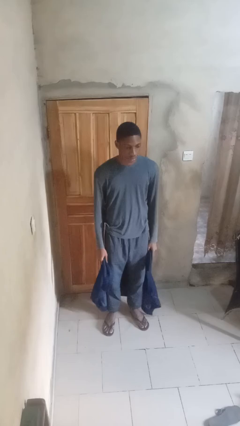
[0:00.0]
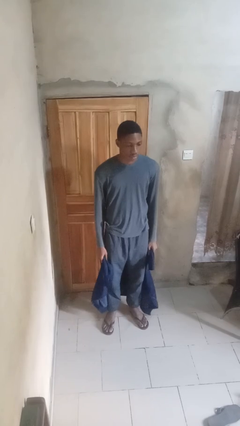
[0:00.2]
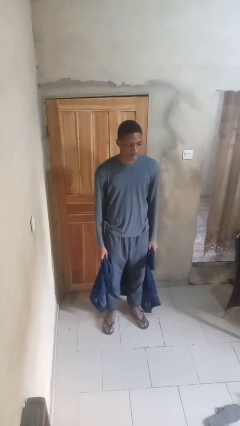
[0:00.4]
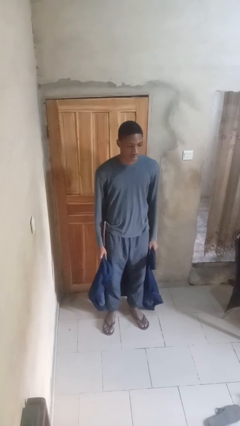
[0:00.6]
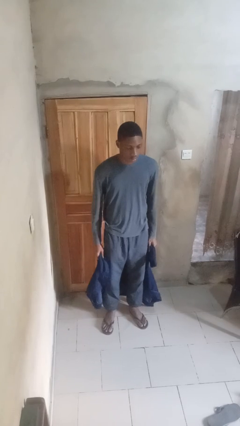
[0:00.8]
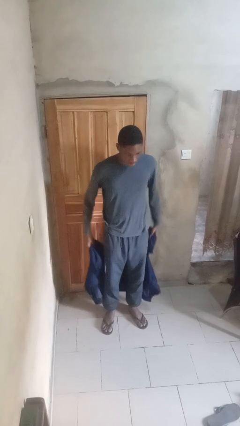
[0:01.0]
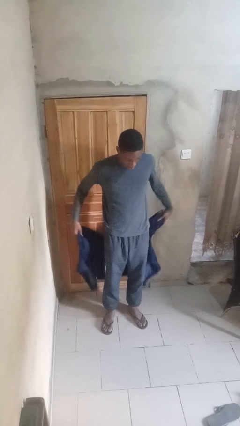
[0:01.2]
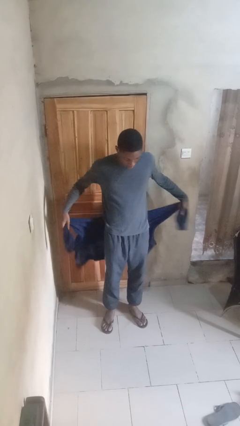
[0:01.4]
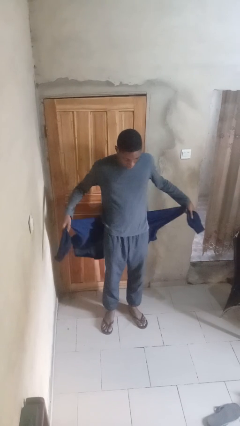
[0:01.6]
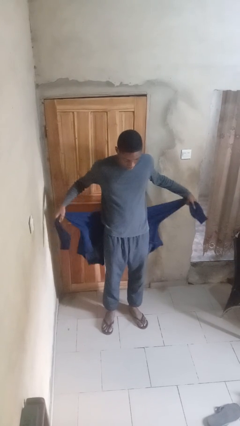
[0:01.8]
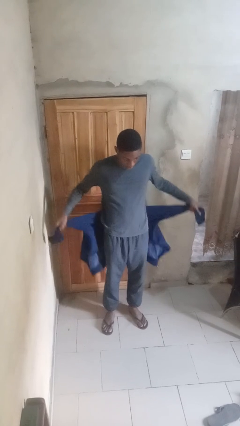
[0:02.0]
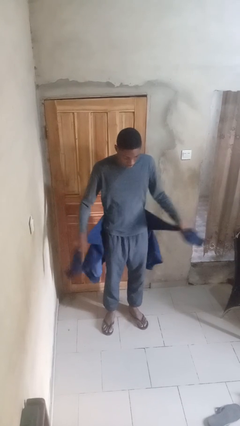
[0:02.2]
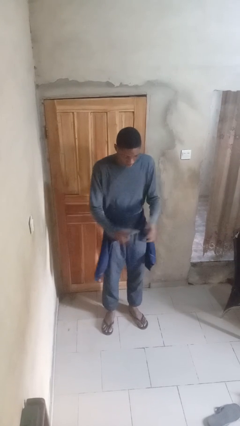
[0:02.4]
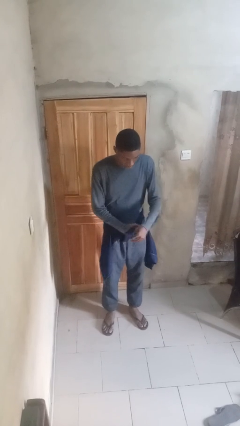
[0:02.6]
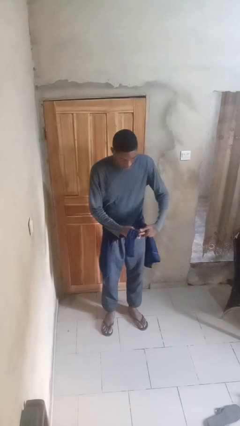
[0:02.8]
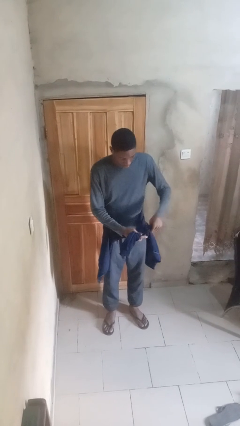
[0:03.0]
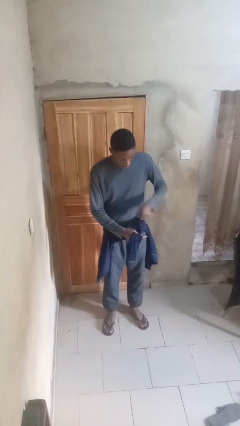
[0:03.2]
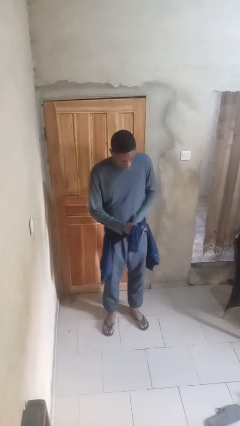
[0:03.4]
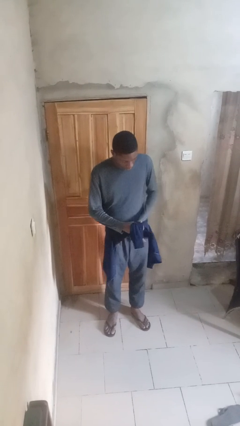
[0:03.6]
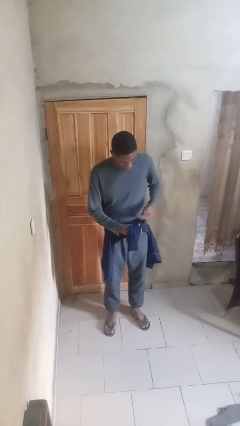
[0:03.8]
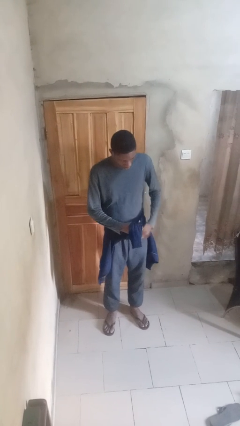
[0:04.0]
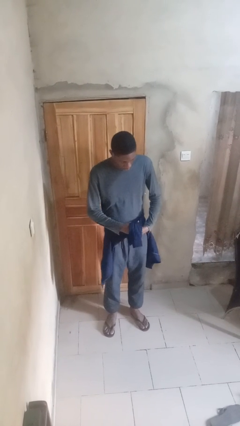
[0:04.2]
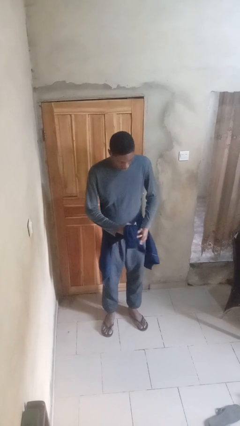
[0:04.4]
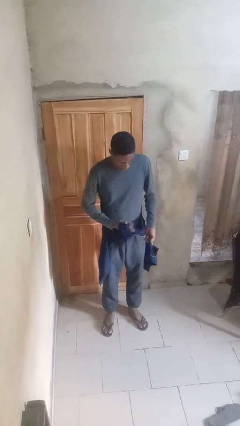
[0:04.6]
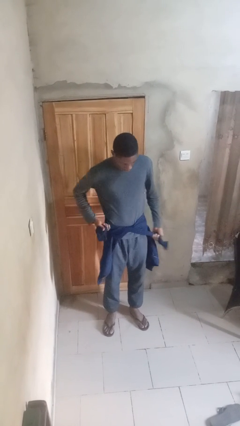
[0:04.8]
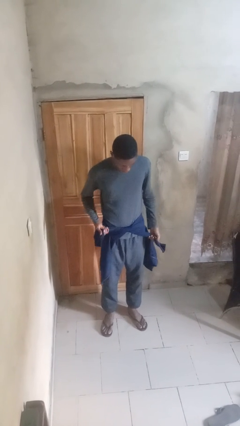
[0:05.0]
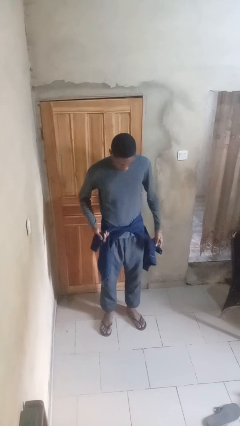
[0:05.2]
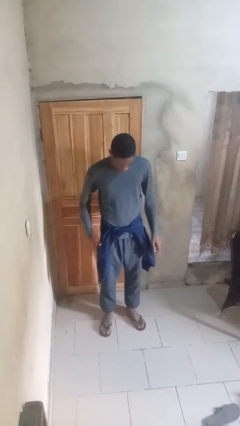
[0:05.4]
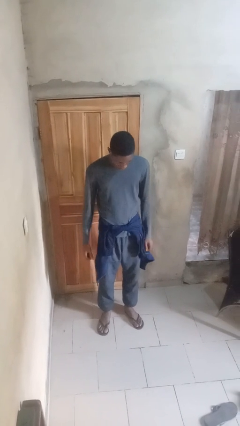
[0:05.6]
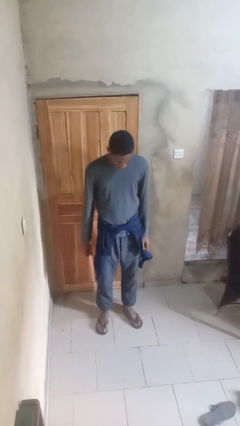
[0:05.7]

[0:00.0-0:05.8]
person ties jacket around waist

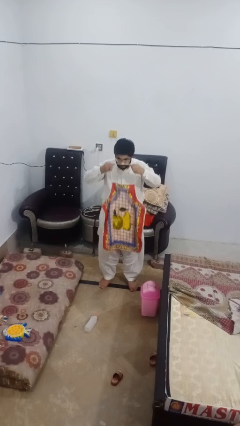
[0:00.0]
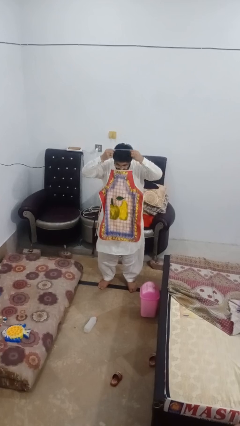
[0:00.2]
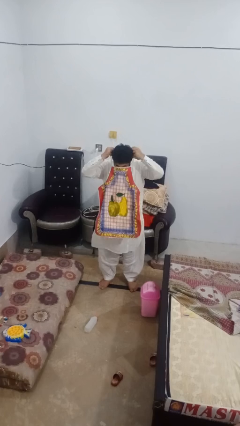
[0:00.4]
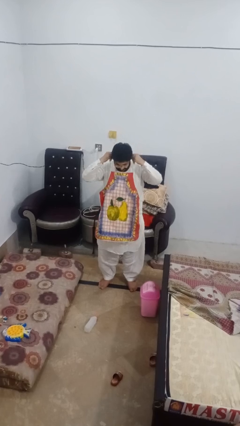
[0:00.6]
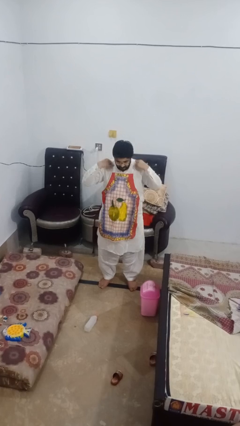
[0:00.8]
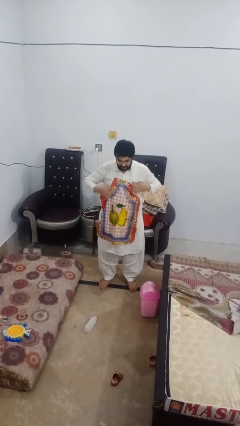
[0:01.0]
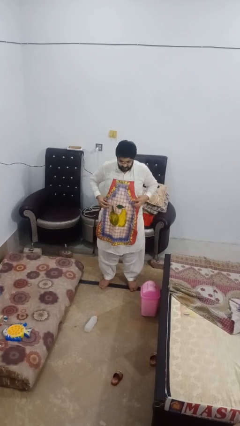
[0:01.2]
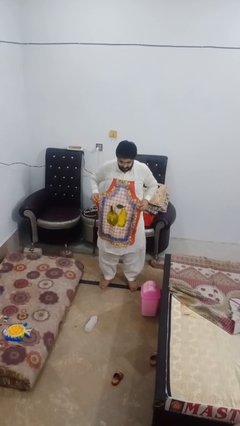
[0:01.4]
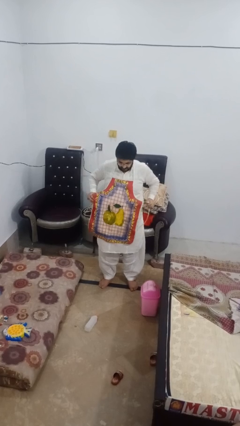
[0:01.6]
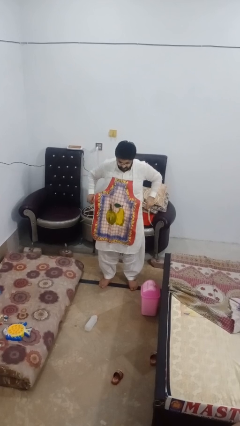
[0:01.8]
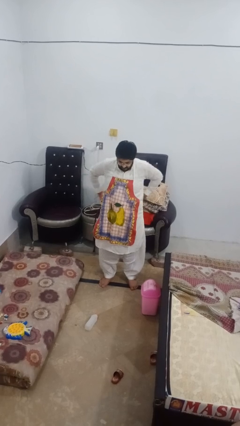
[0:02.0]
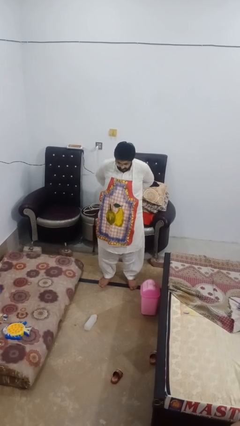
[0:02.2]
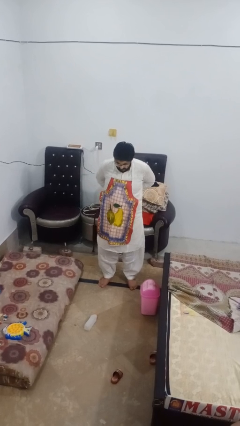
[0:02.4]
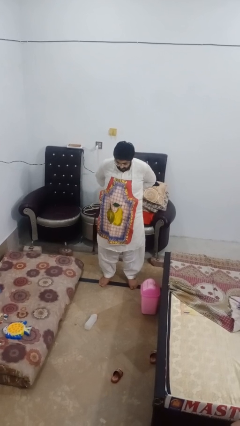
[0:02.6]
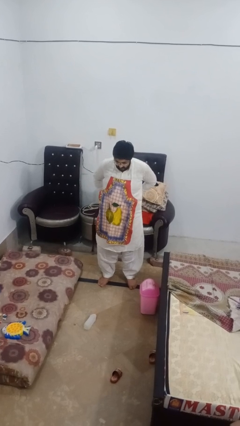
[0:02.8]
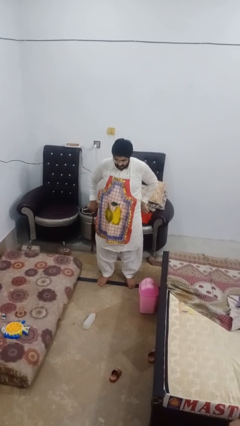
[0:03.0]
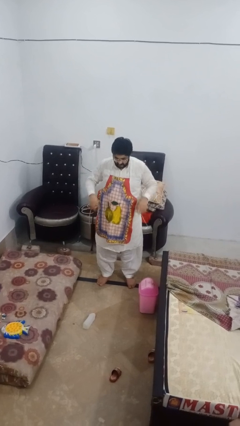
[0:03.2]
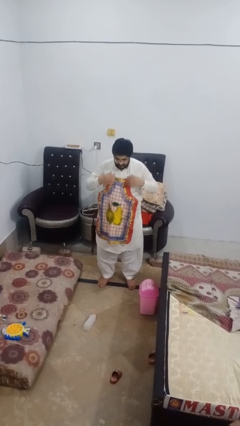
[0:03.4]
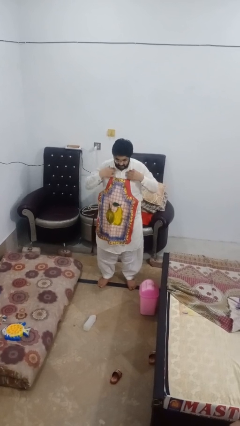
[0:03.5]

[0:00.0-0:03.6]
person puts on apron

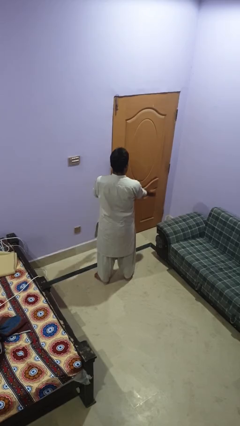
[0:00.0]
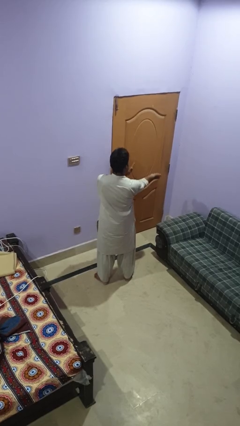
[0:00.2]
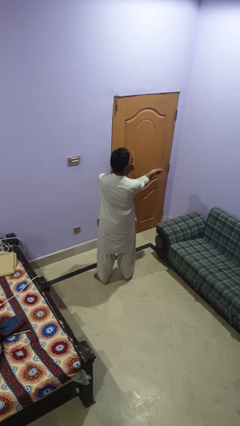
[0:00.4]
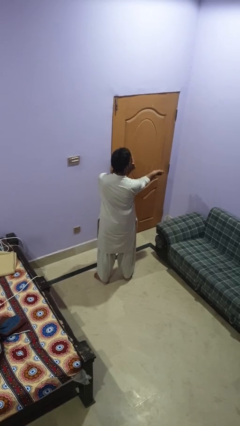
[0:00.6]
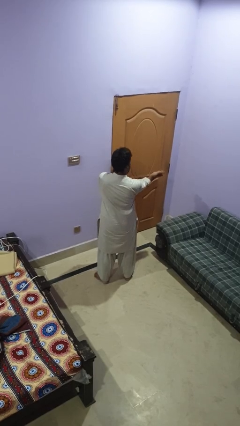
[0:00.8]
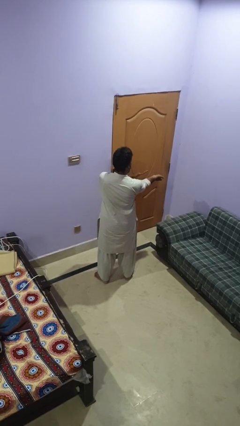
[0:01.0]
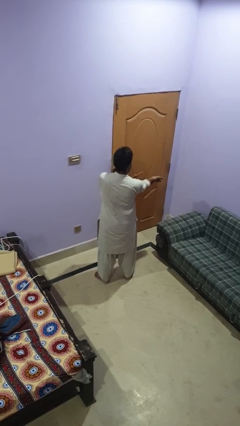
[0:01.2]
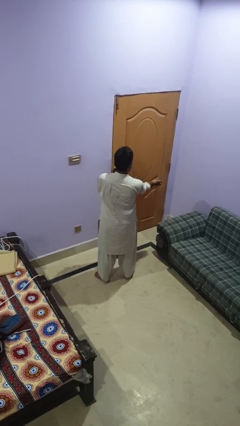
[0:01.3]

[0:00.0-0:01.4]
person swats bug

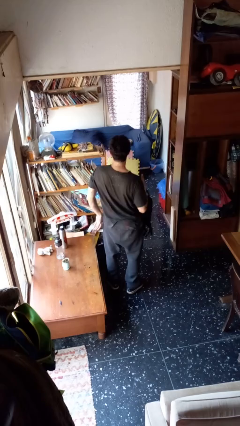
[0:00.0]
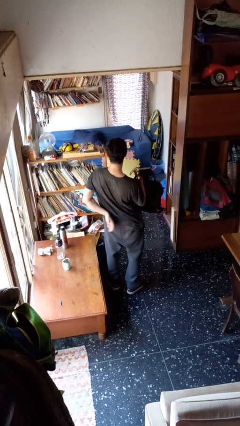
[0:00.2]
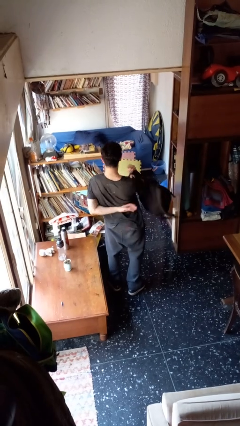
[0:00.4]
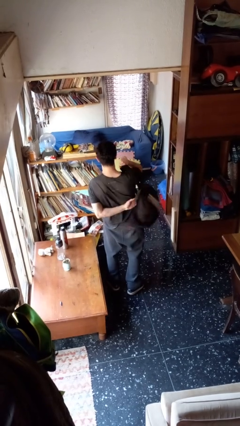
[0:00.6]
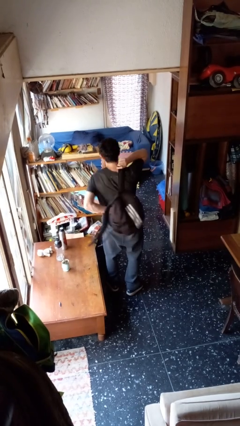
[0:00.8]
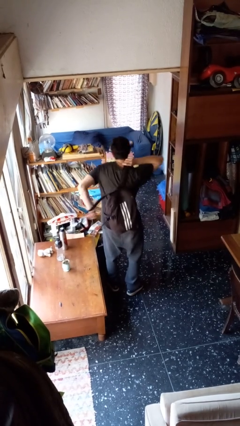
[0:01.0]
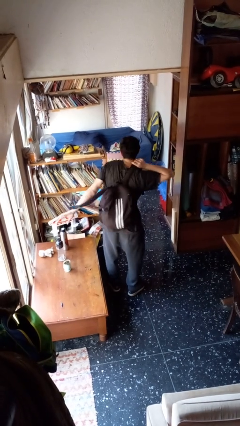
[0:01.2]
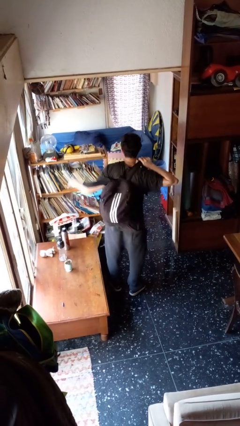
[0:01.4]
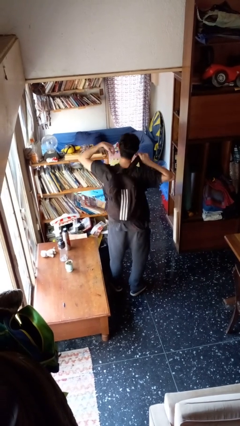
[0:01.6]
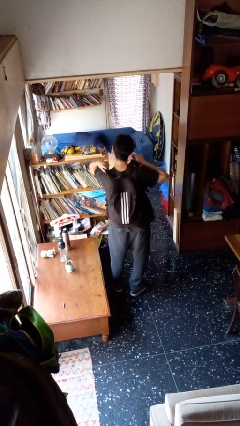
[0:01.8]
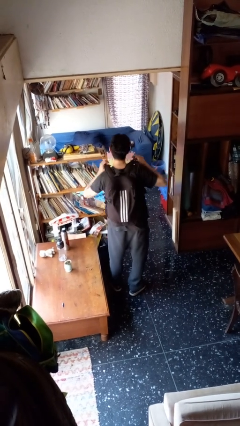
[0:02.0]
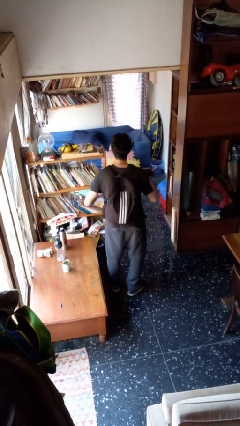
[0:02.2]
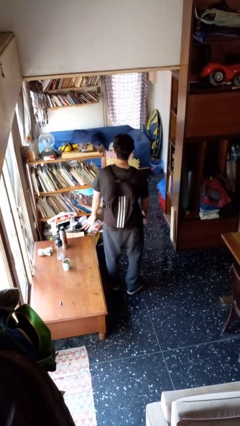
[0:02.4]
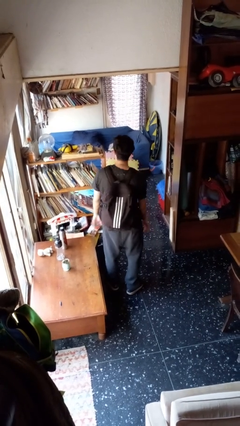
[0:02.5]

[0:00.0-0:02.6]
person puts on backpack

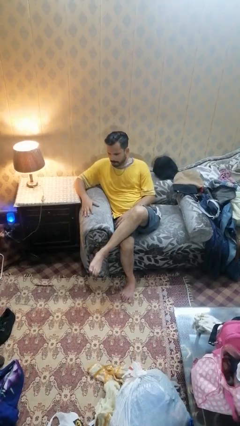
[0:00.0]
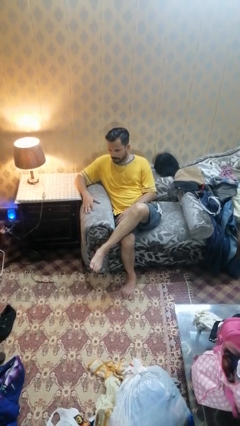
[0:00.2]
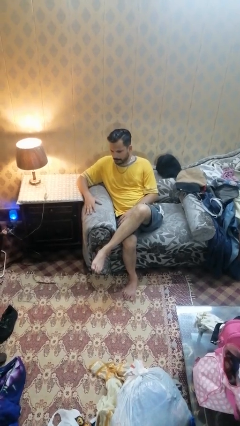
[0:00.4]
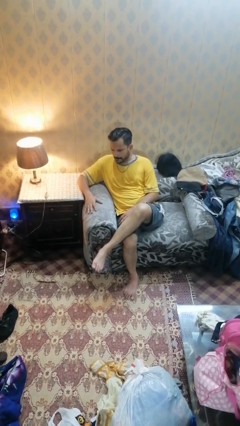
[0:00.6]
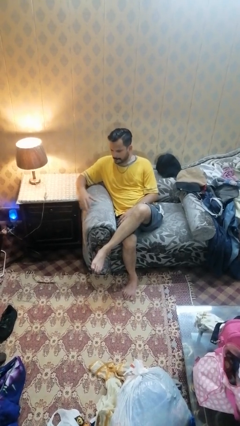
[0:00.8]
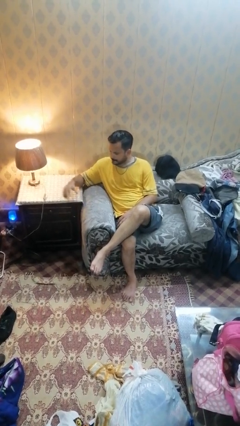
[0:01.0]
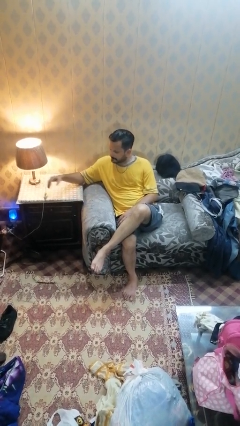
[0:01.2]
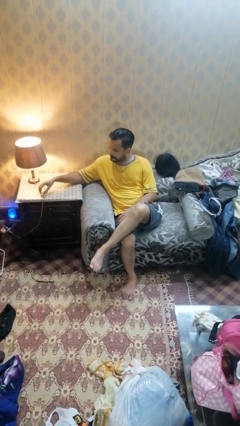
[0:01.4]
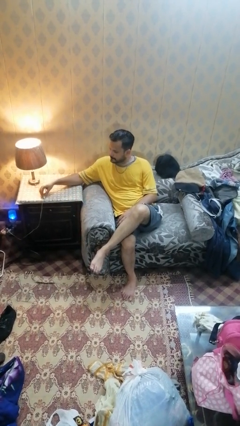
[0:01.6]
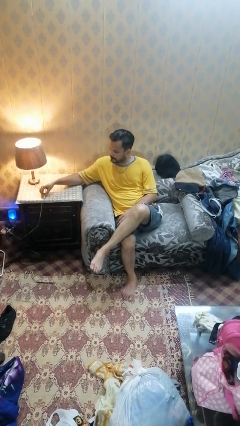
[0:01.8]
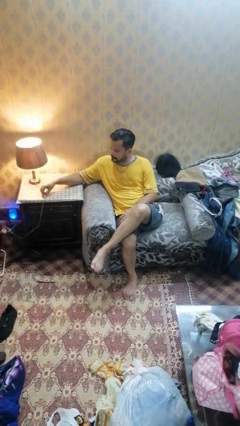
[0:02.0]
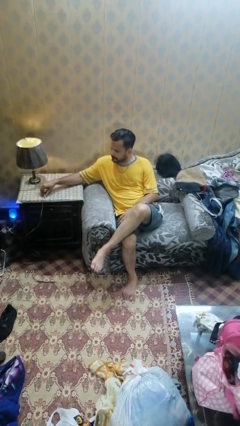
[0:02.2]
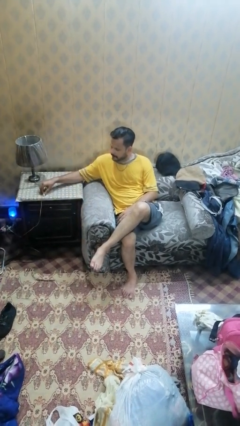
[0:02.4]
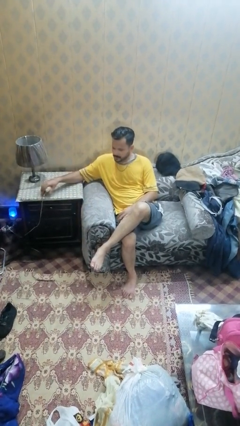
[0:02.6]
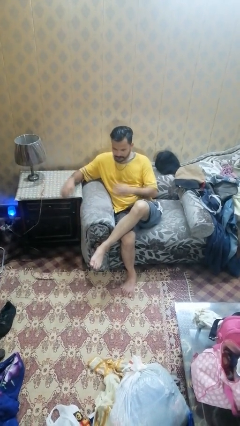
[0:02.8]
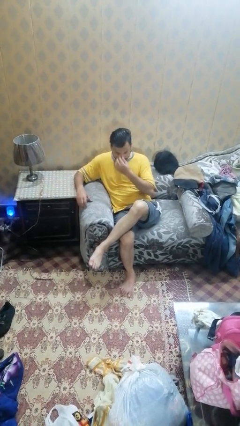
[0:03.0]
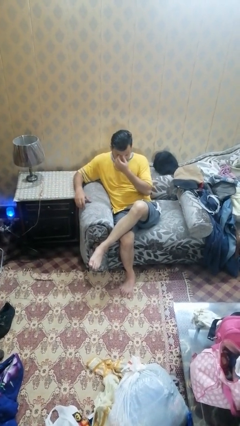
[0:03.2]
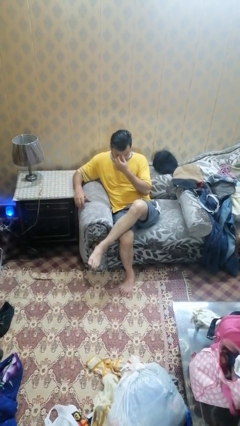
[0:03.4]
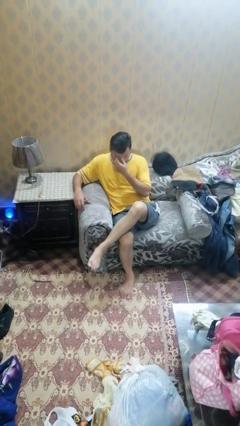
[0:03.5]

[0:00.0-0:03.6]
person turns off lamp

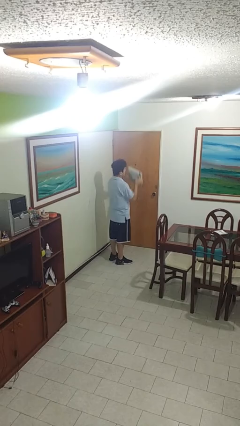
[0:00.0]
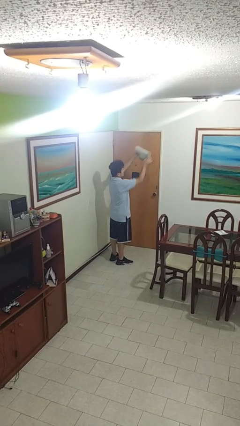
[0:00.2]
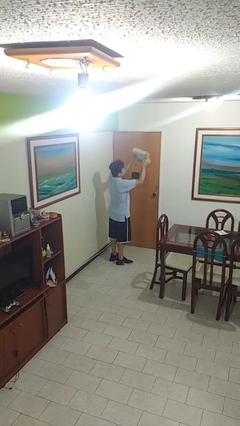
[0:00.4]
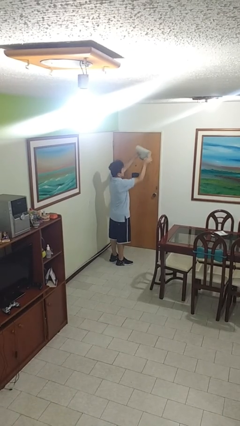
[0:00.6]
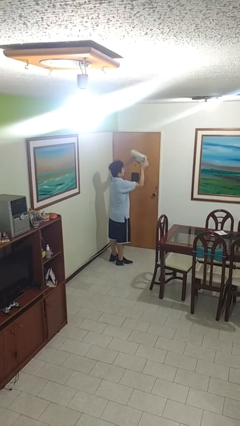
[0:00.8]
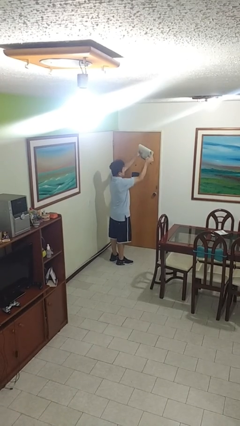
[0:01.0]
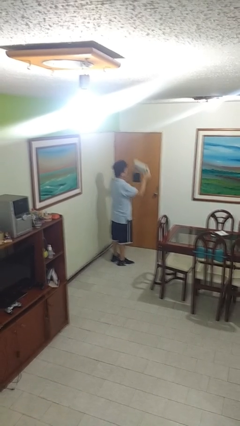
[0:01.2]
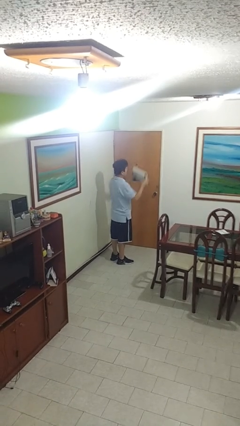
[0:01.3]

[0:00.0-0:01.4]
person holds object above head
